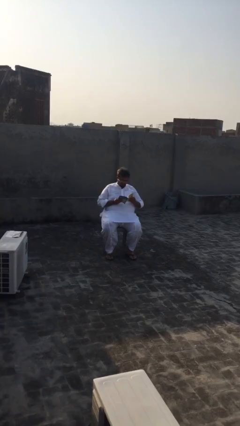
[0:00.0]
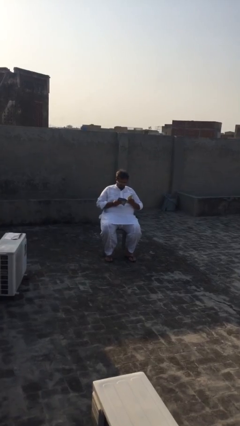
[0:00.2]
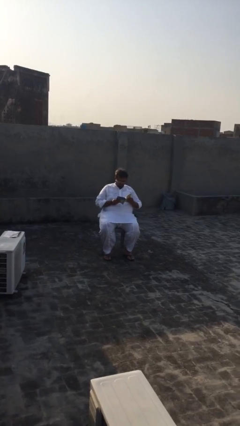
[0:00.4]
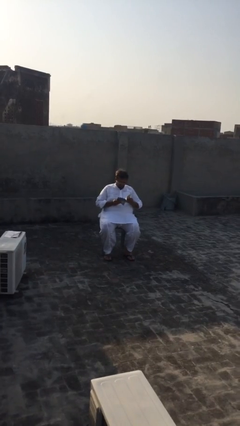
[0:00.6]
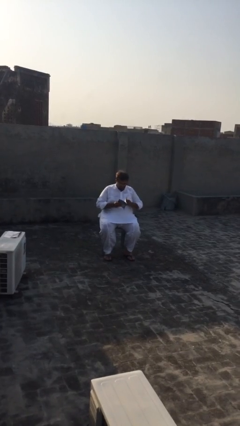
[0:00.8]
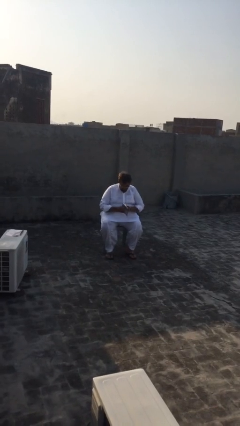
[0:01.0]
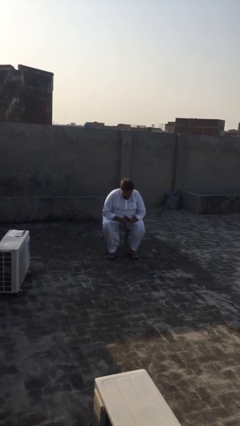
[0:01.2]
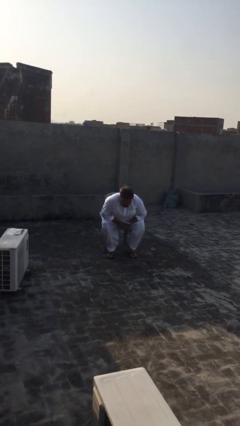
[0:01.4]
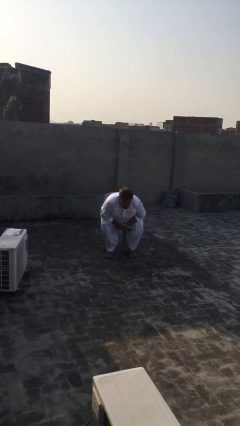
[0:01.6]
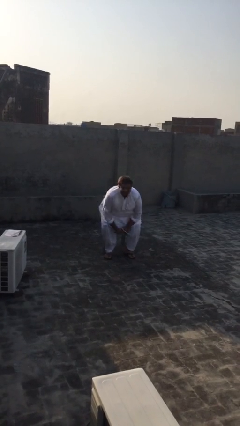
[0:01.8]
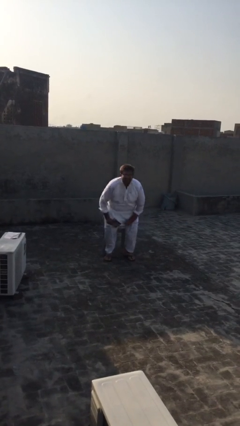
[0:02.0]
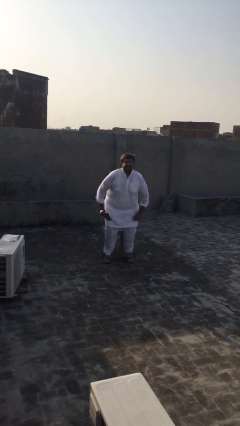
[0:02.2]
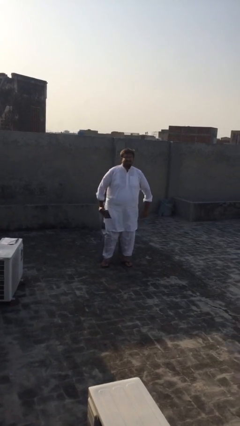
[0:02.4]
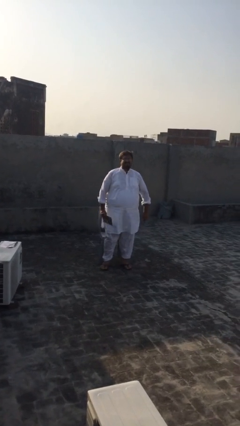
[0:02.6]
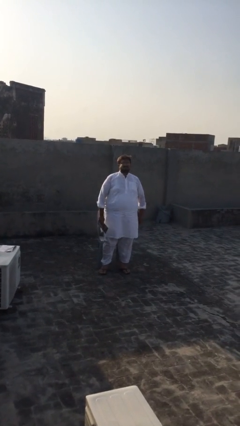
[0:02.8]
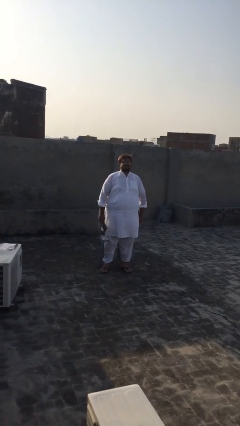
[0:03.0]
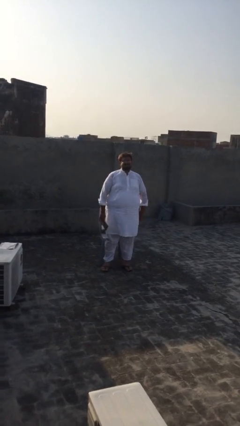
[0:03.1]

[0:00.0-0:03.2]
person stands up

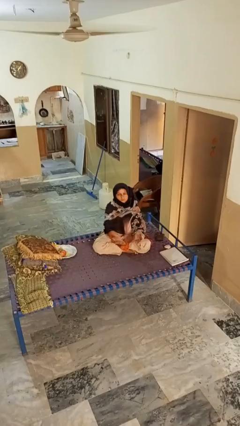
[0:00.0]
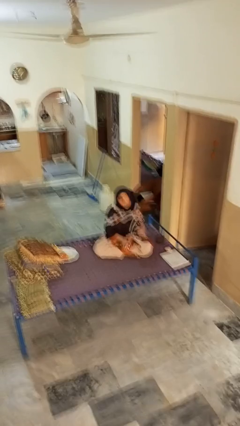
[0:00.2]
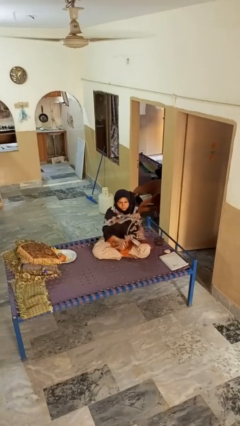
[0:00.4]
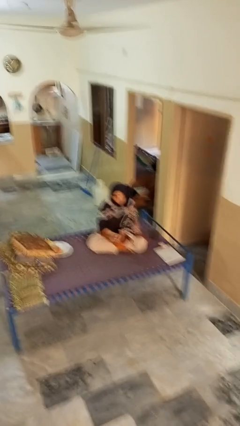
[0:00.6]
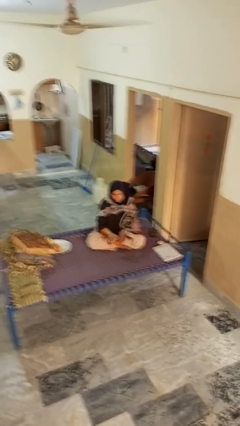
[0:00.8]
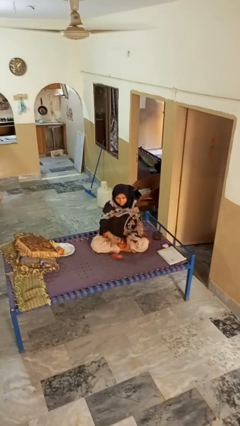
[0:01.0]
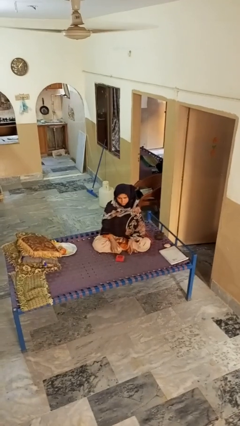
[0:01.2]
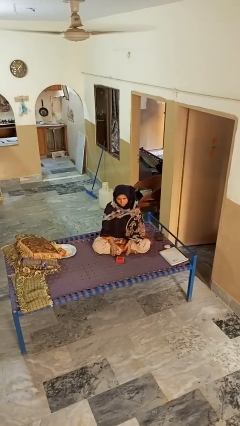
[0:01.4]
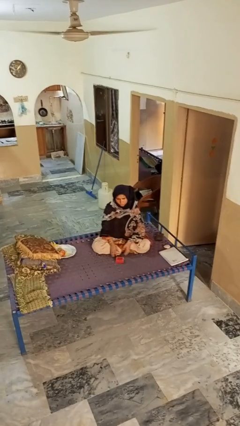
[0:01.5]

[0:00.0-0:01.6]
person catches dropped object

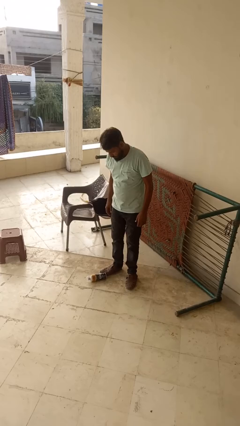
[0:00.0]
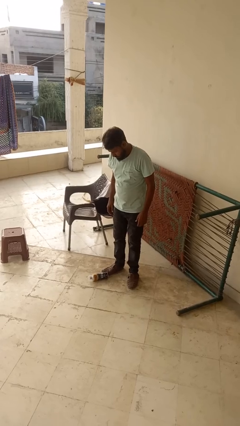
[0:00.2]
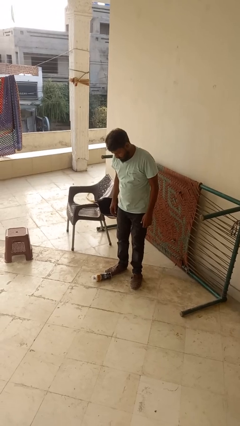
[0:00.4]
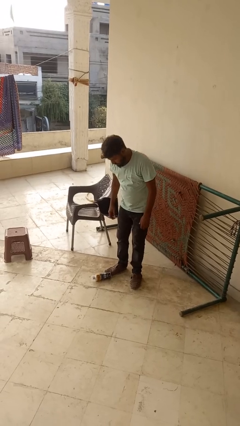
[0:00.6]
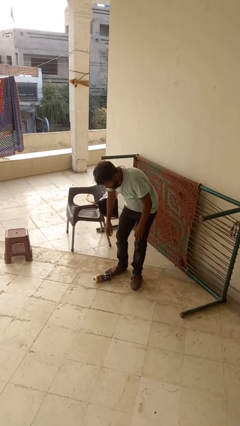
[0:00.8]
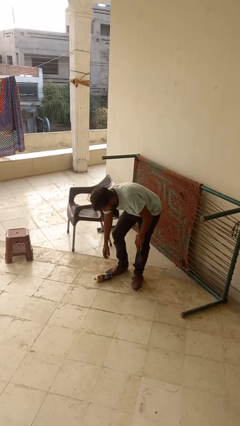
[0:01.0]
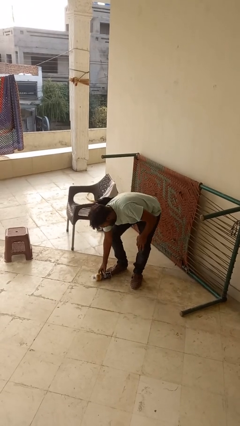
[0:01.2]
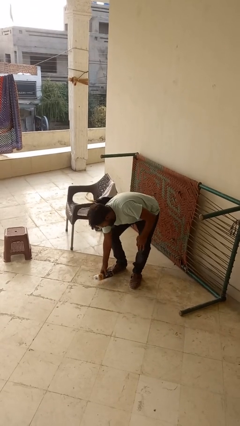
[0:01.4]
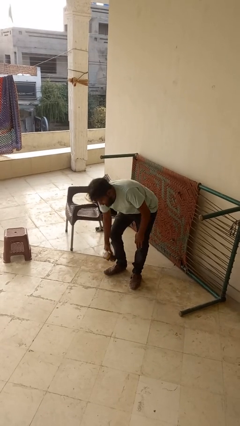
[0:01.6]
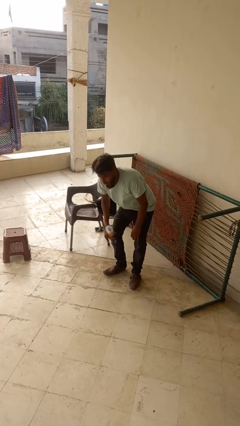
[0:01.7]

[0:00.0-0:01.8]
person picks up object from floor

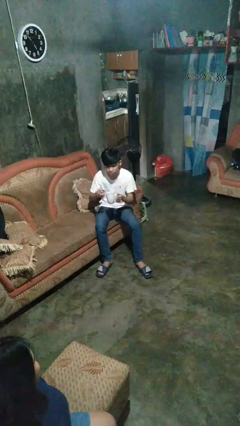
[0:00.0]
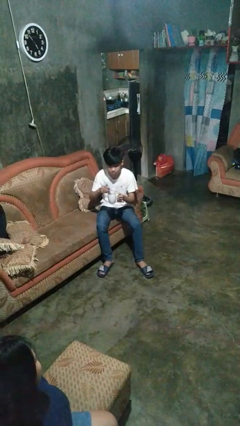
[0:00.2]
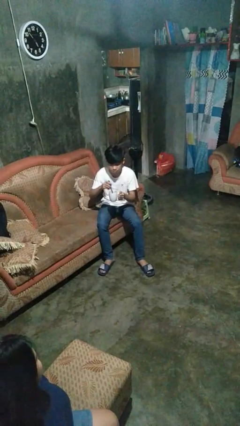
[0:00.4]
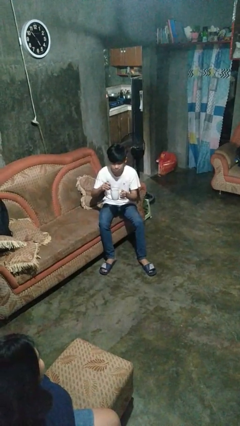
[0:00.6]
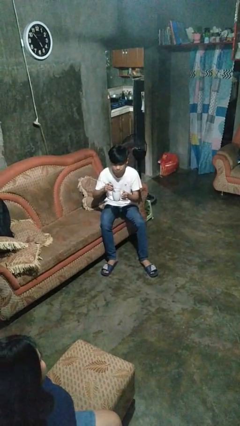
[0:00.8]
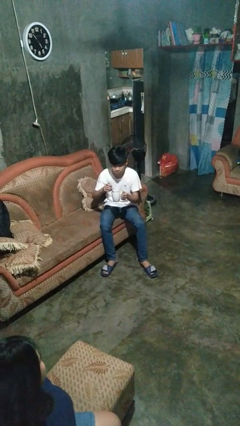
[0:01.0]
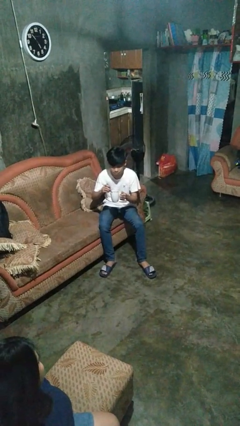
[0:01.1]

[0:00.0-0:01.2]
person stirs mug

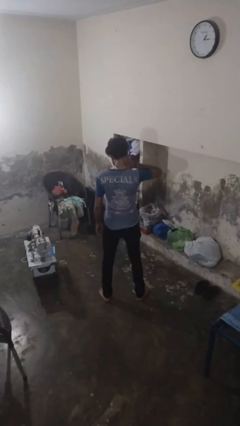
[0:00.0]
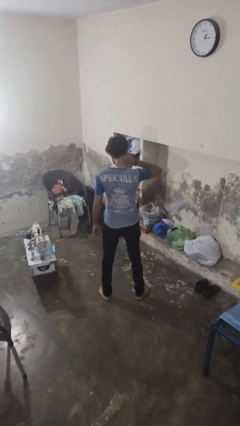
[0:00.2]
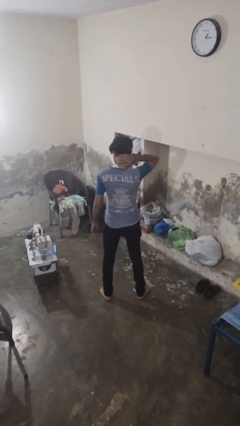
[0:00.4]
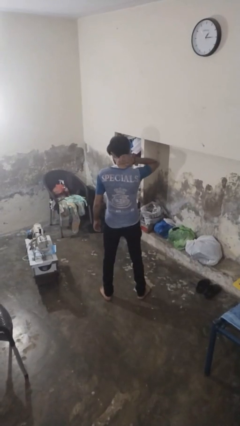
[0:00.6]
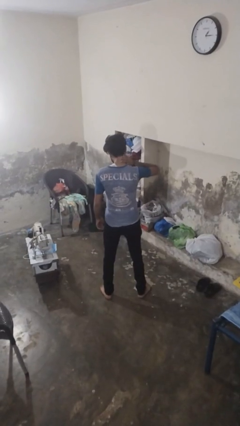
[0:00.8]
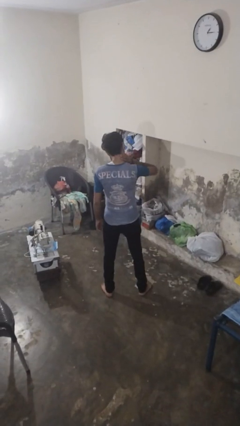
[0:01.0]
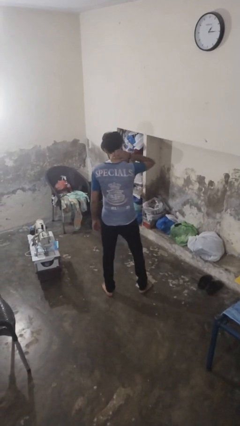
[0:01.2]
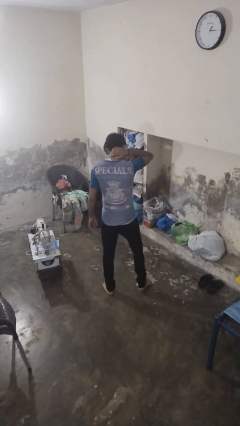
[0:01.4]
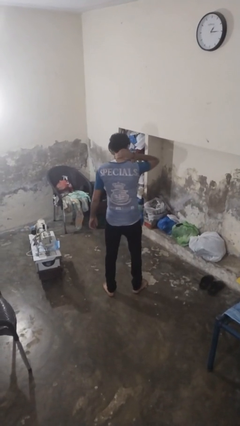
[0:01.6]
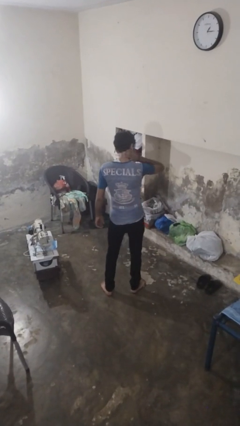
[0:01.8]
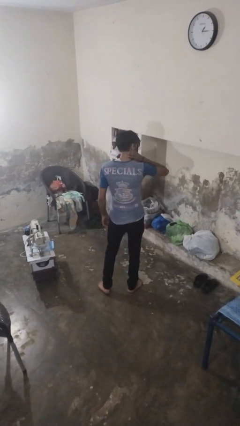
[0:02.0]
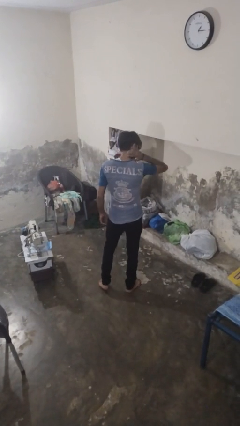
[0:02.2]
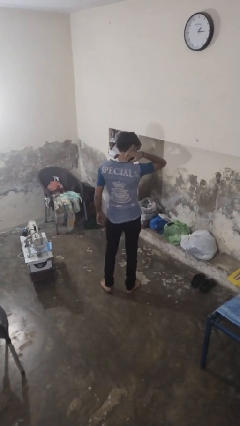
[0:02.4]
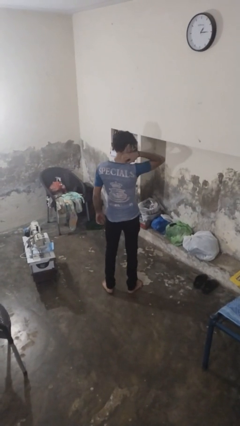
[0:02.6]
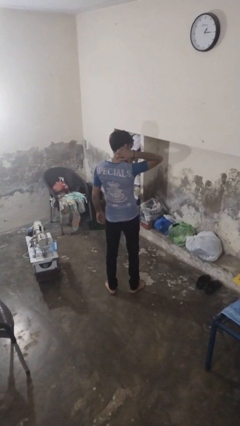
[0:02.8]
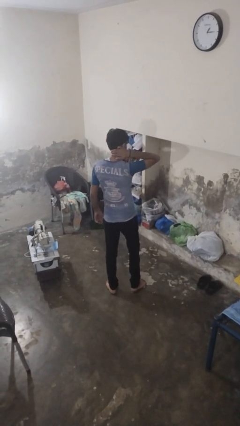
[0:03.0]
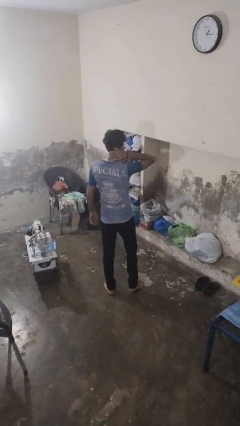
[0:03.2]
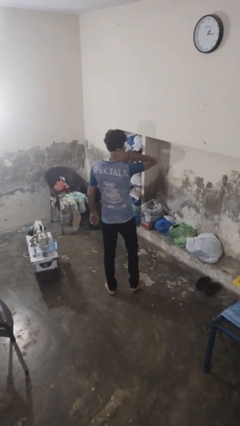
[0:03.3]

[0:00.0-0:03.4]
person rubs neck

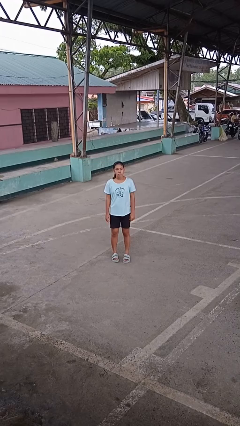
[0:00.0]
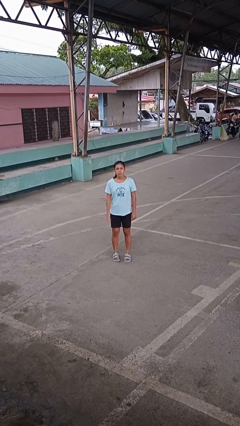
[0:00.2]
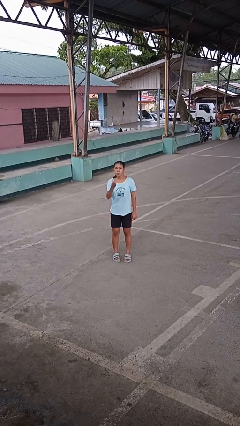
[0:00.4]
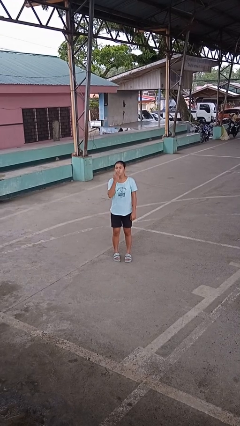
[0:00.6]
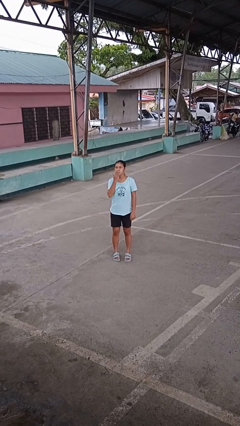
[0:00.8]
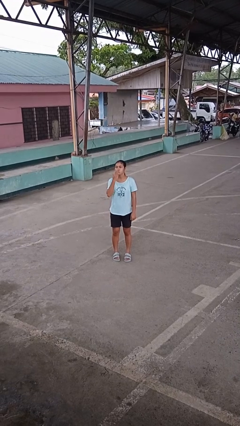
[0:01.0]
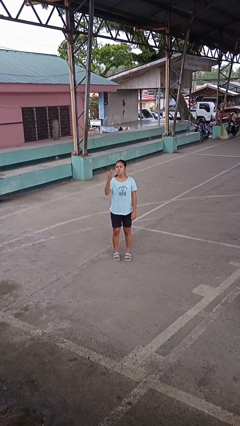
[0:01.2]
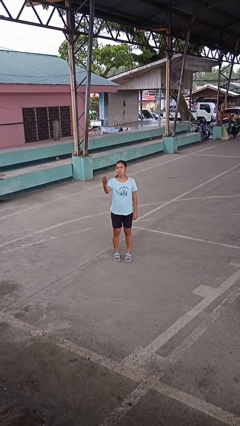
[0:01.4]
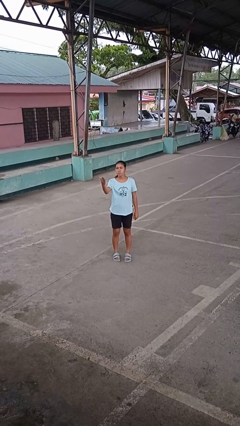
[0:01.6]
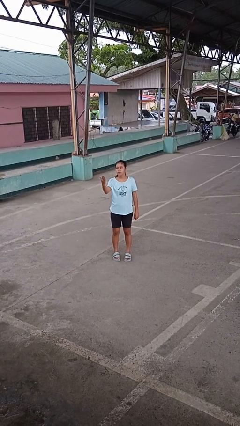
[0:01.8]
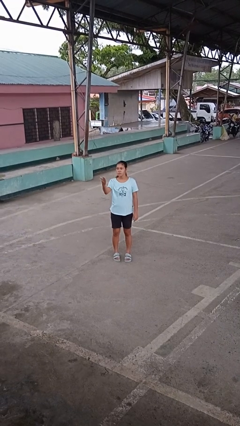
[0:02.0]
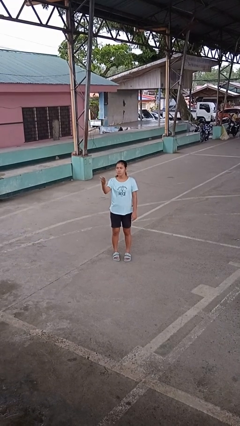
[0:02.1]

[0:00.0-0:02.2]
person gestures blow kiss

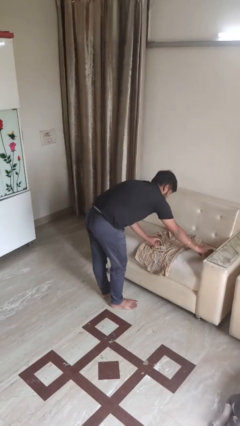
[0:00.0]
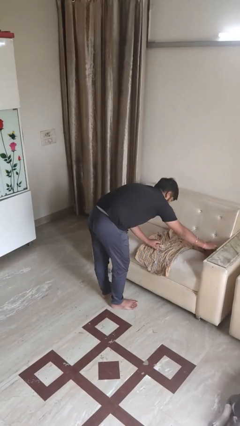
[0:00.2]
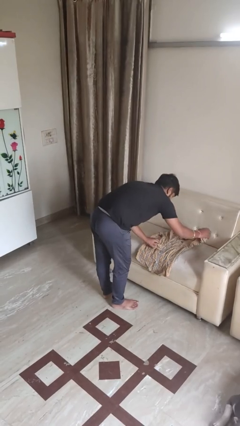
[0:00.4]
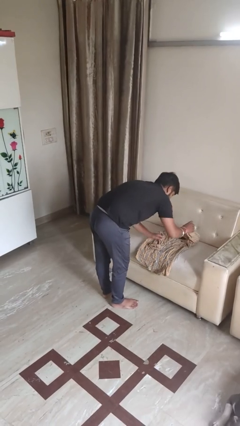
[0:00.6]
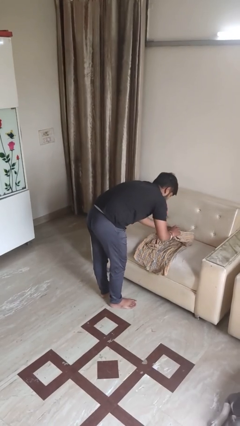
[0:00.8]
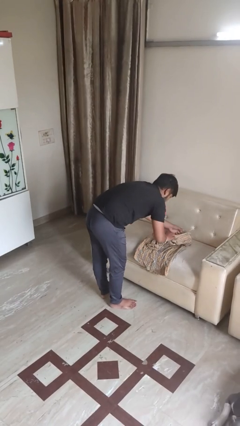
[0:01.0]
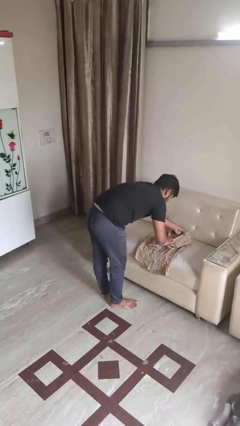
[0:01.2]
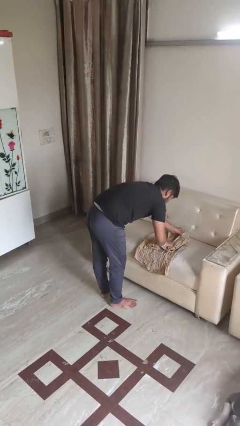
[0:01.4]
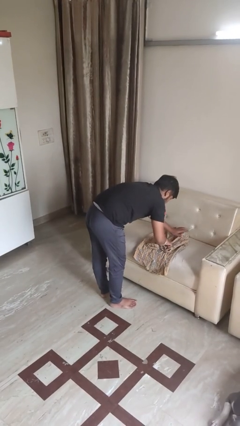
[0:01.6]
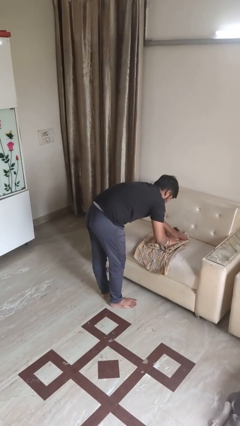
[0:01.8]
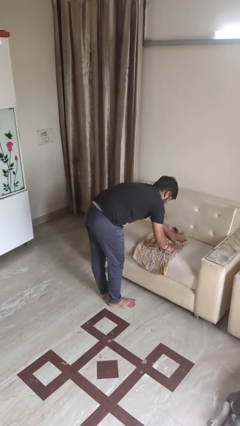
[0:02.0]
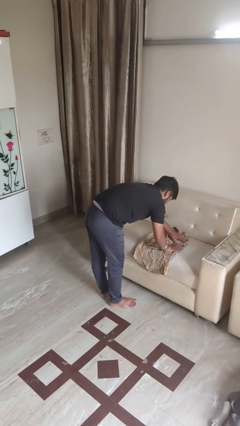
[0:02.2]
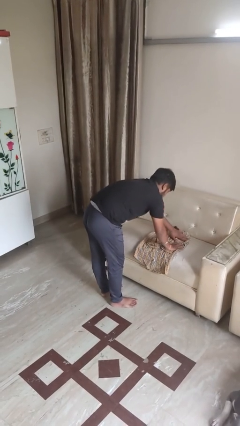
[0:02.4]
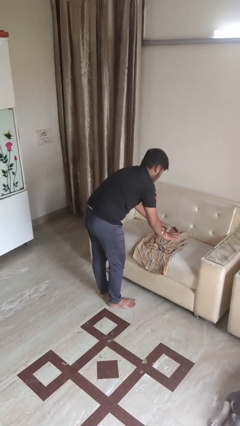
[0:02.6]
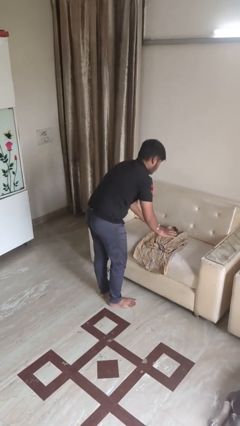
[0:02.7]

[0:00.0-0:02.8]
person folds shirt

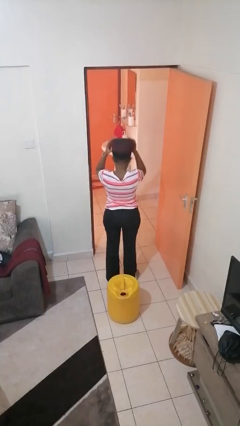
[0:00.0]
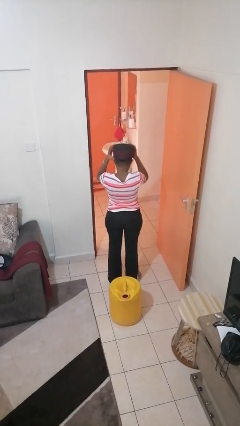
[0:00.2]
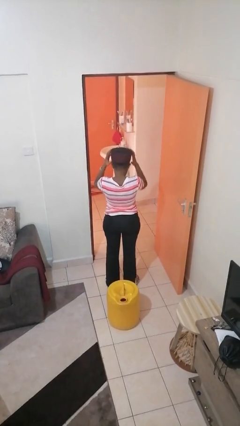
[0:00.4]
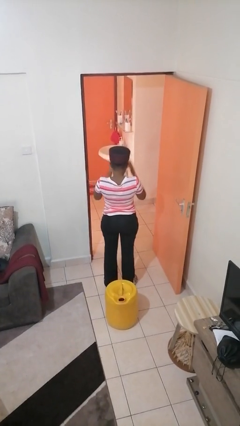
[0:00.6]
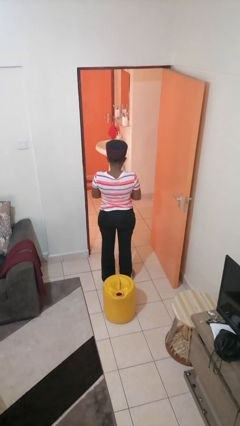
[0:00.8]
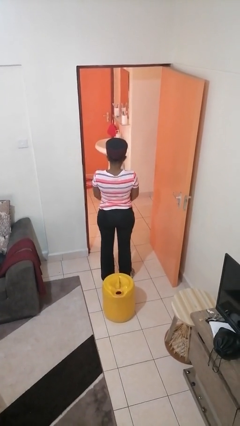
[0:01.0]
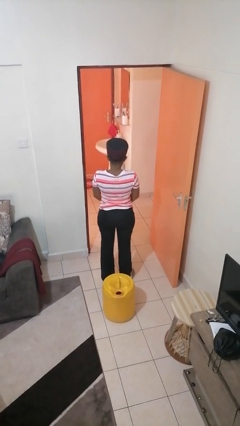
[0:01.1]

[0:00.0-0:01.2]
person puts on hat
